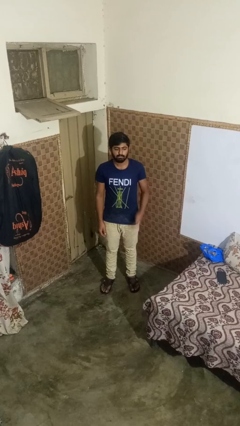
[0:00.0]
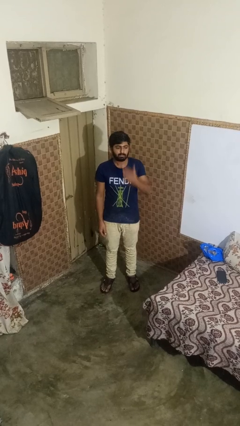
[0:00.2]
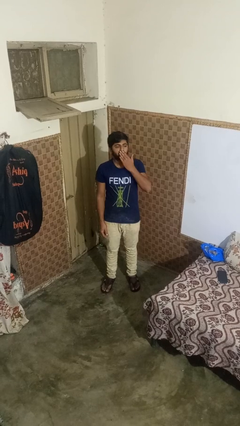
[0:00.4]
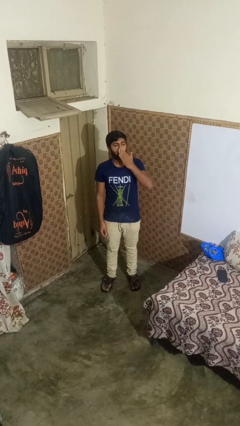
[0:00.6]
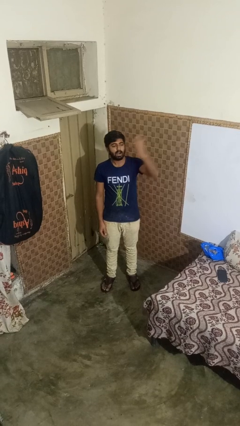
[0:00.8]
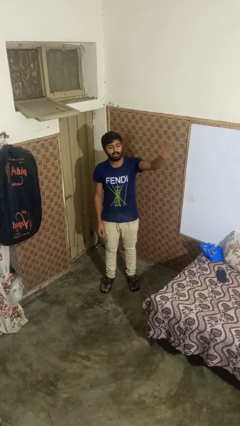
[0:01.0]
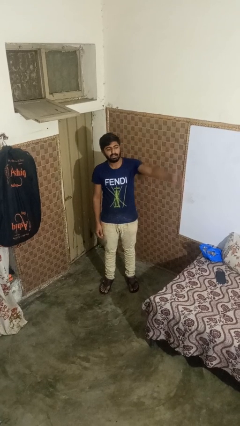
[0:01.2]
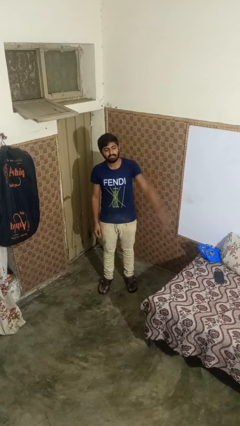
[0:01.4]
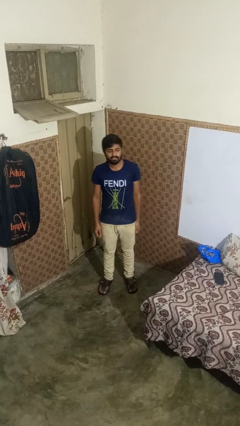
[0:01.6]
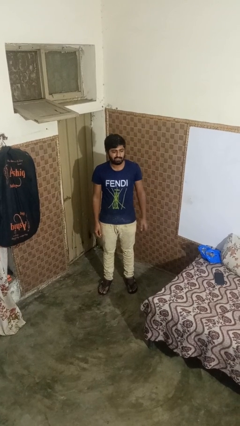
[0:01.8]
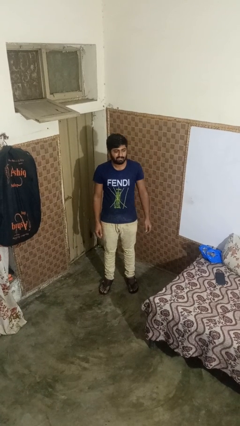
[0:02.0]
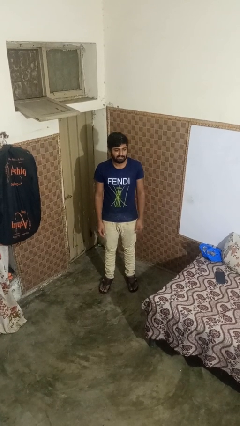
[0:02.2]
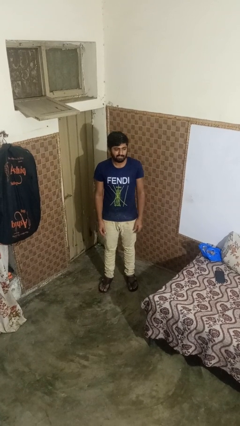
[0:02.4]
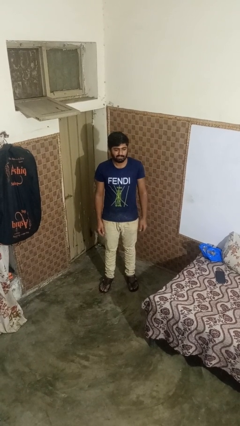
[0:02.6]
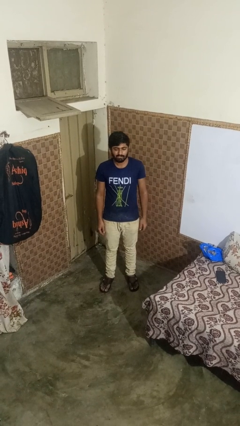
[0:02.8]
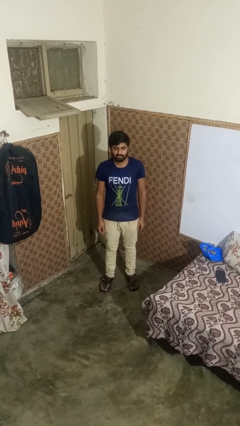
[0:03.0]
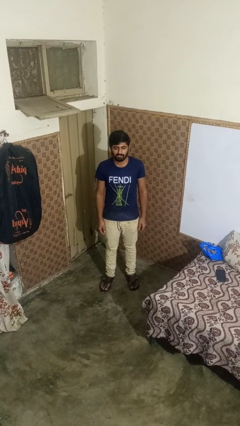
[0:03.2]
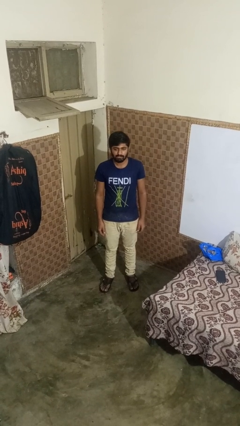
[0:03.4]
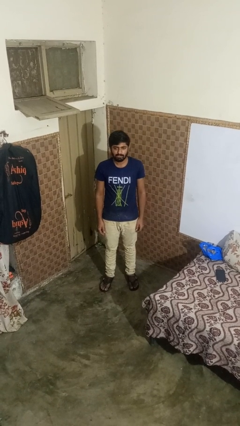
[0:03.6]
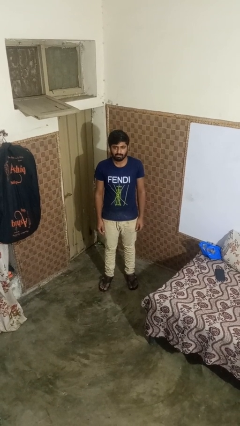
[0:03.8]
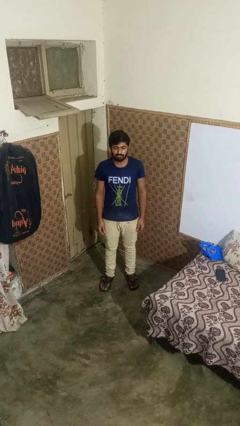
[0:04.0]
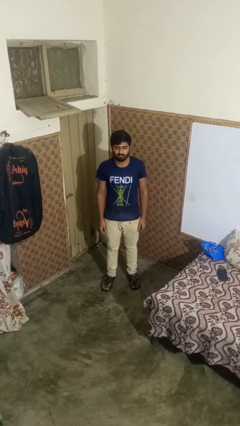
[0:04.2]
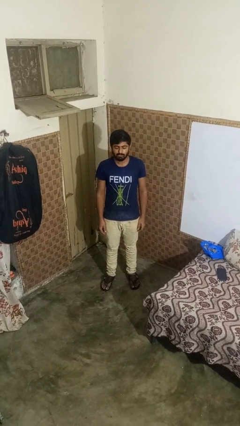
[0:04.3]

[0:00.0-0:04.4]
person gestures blow kiss

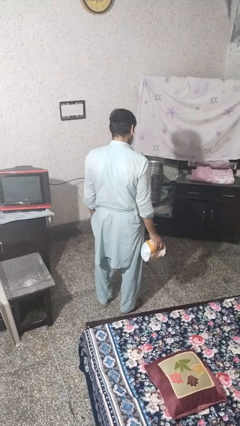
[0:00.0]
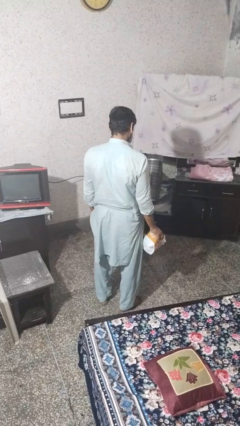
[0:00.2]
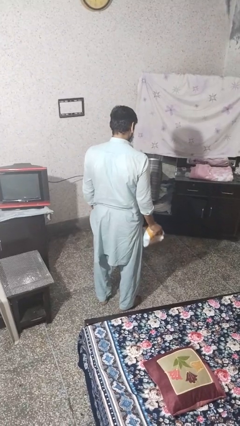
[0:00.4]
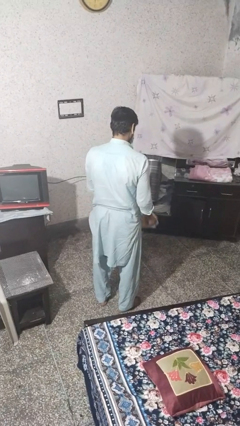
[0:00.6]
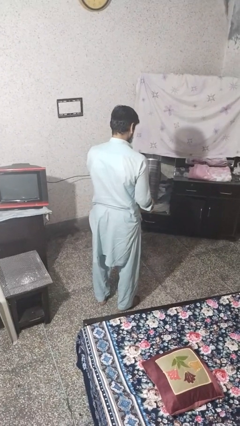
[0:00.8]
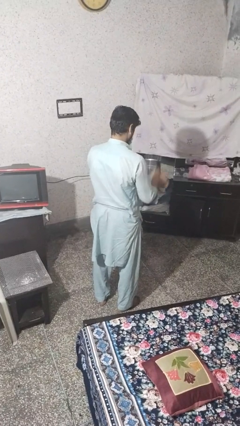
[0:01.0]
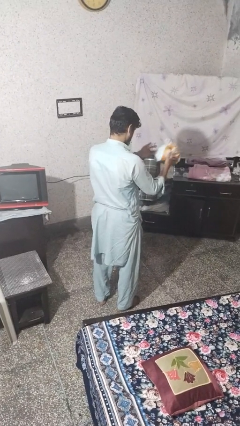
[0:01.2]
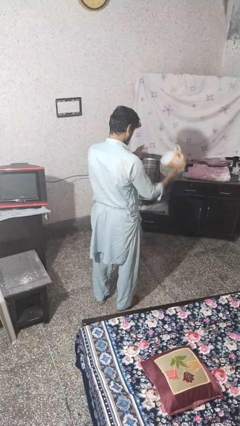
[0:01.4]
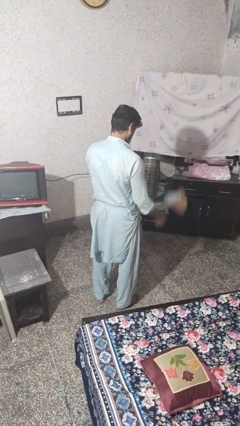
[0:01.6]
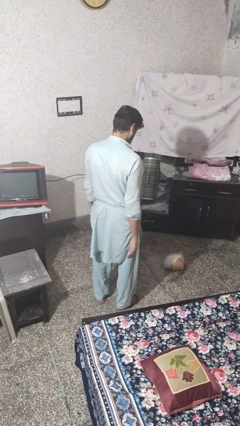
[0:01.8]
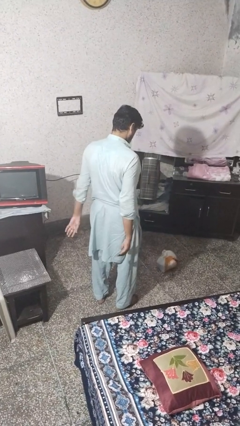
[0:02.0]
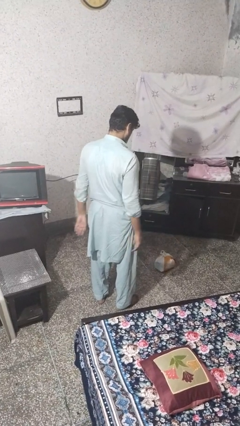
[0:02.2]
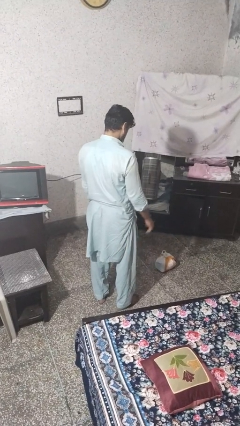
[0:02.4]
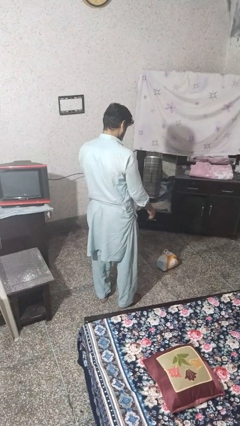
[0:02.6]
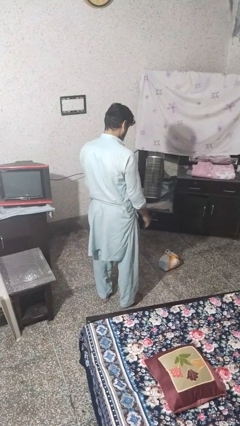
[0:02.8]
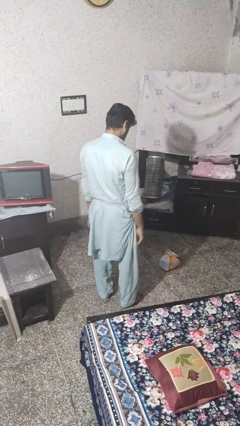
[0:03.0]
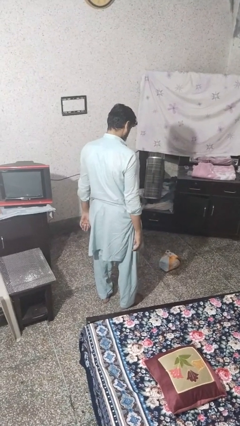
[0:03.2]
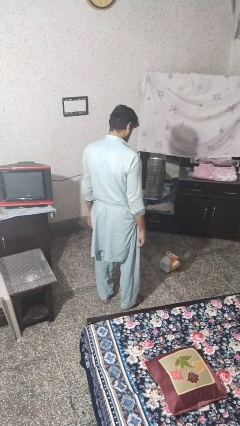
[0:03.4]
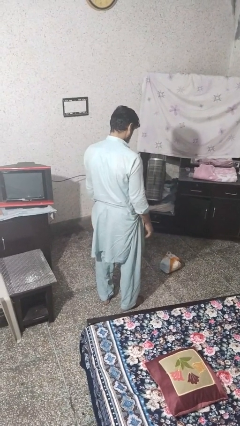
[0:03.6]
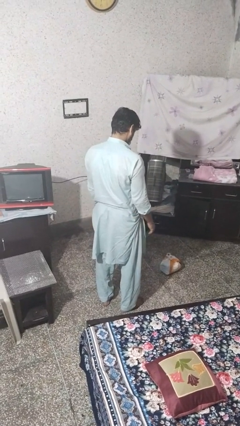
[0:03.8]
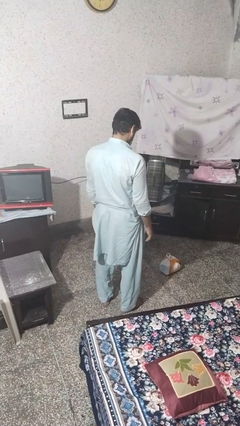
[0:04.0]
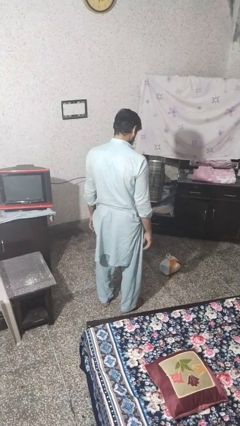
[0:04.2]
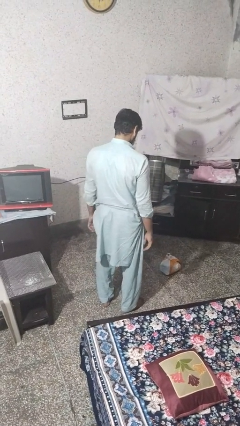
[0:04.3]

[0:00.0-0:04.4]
person throws object to ground

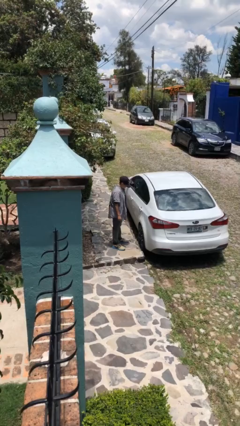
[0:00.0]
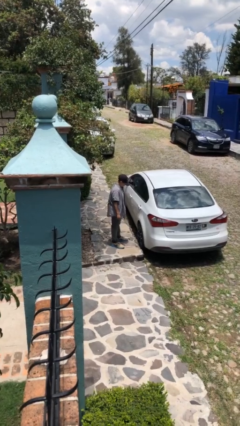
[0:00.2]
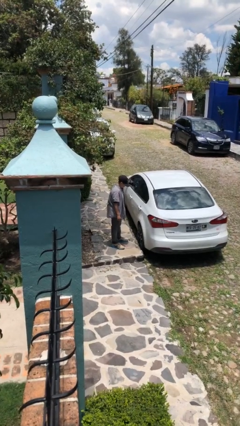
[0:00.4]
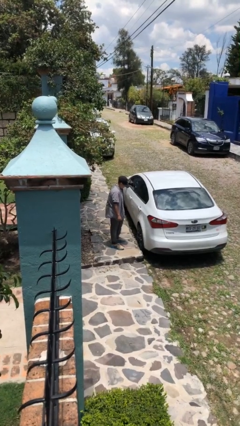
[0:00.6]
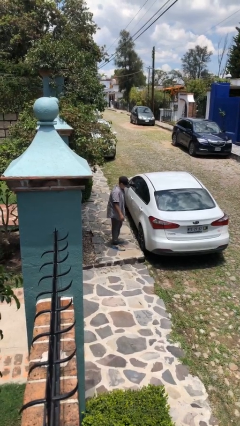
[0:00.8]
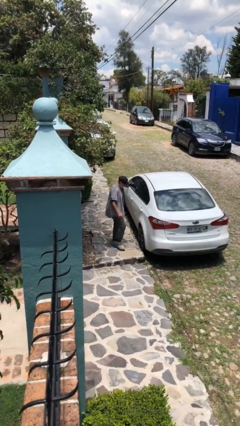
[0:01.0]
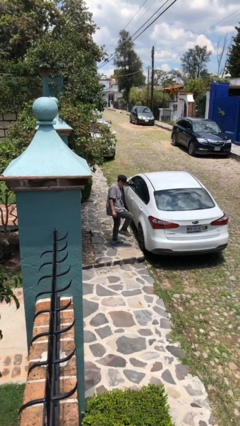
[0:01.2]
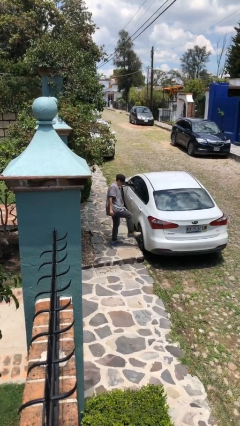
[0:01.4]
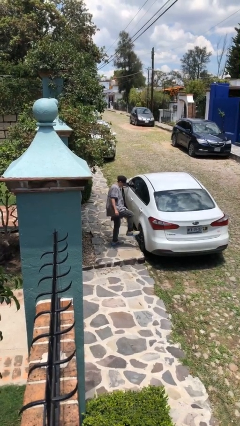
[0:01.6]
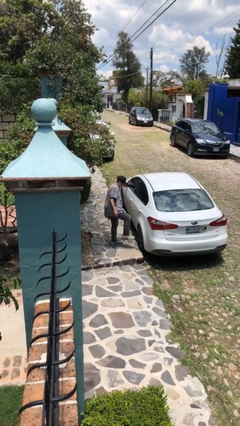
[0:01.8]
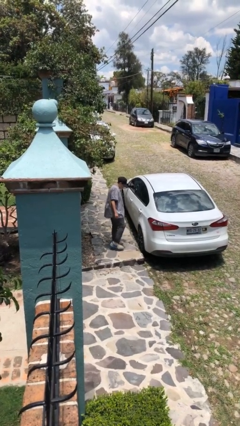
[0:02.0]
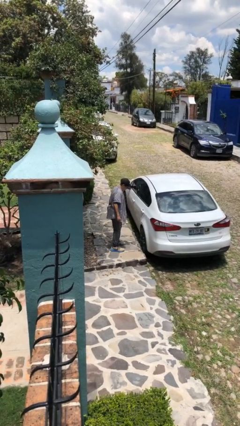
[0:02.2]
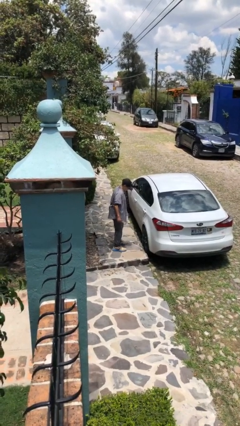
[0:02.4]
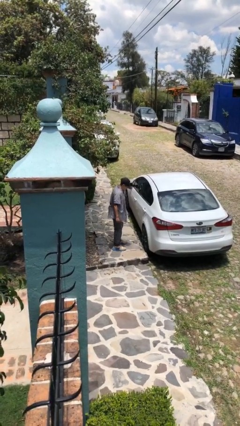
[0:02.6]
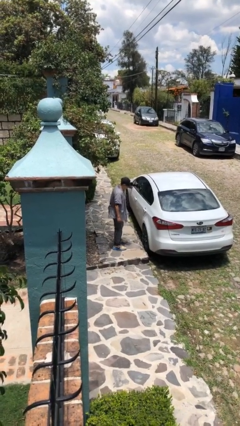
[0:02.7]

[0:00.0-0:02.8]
person kicks car tires

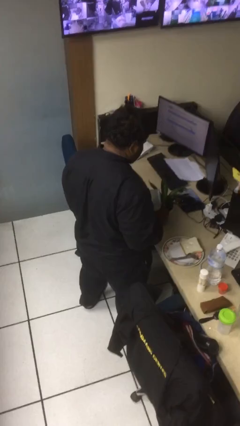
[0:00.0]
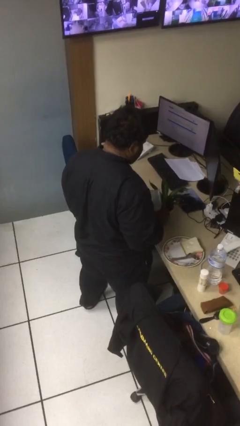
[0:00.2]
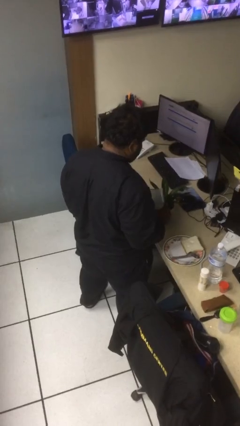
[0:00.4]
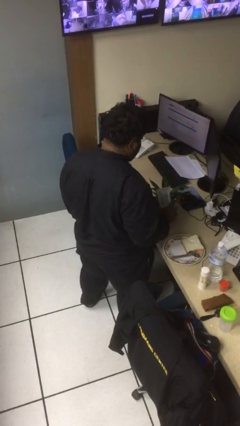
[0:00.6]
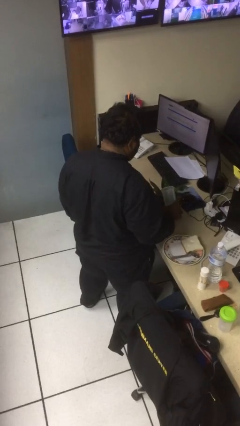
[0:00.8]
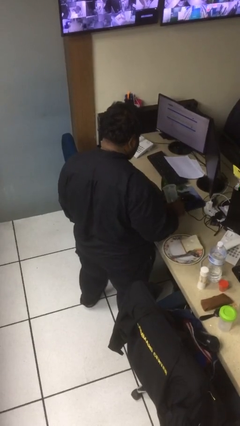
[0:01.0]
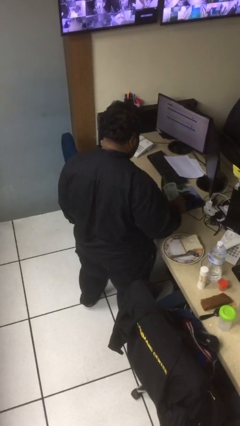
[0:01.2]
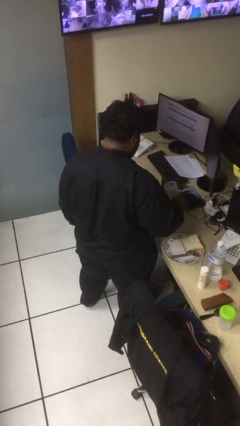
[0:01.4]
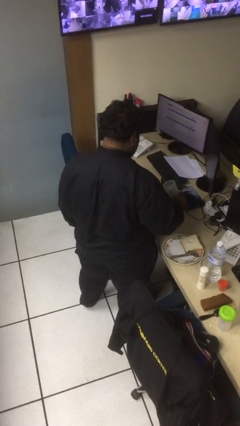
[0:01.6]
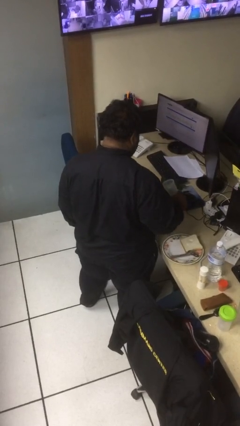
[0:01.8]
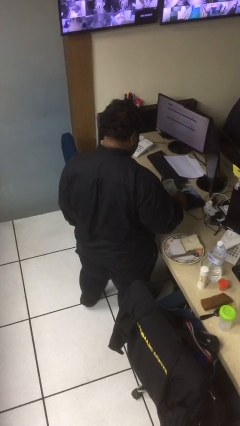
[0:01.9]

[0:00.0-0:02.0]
person waters houseplant

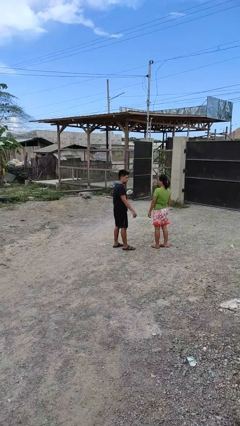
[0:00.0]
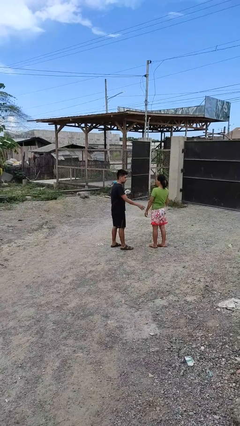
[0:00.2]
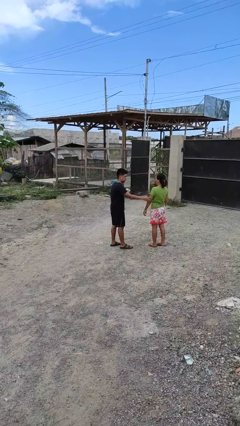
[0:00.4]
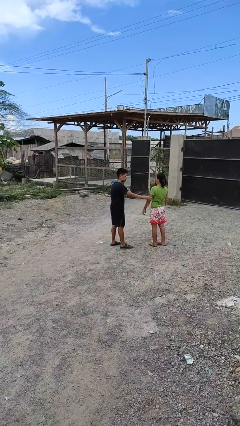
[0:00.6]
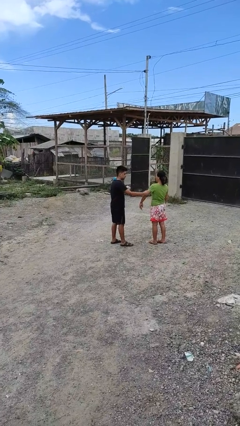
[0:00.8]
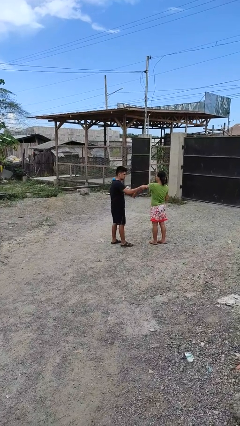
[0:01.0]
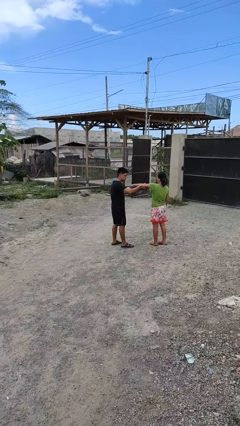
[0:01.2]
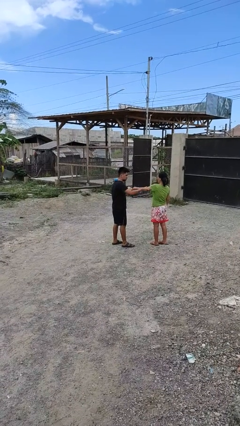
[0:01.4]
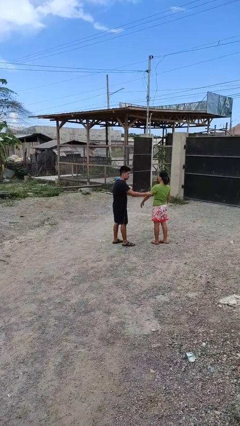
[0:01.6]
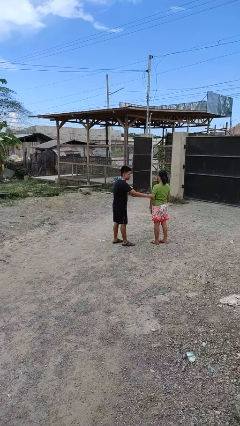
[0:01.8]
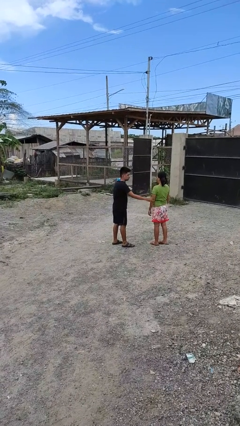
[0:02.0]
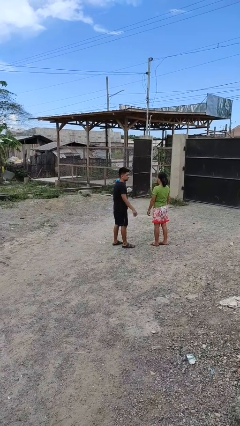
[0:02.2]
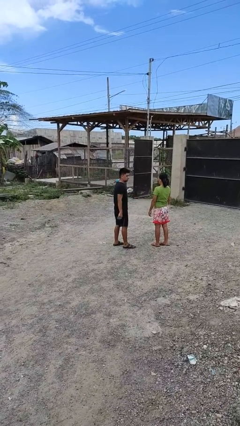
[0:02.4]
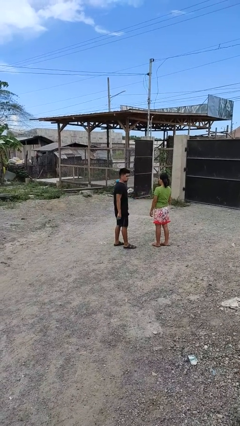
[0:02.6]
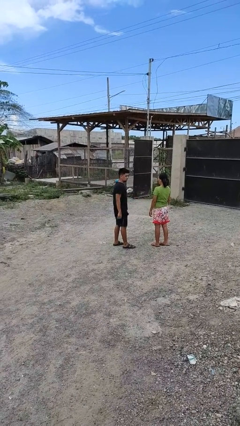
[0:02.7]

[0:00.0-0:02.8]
person grabs person by bicep

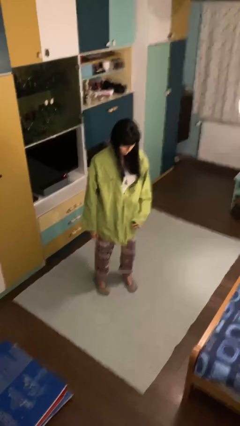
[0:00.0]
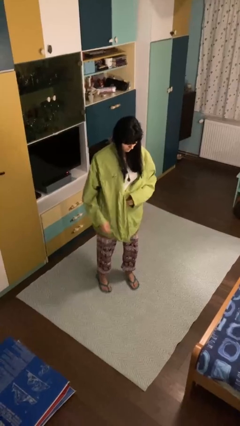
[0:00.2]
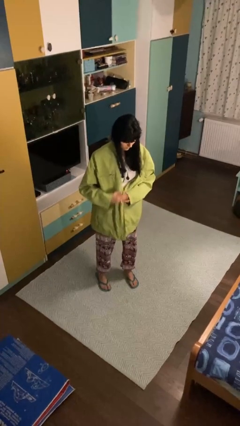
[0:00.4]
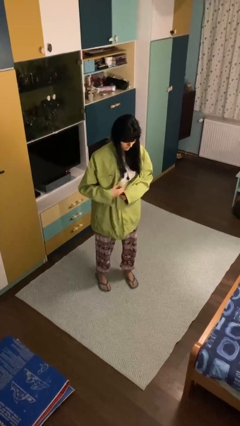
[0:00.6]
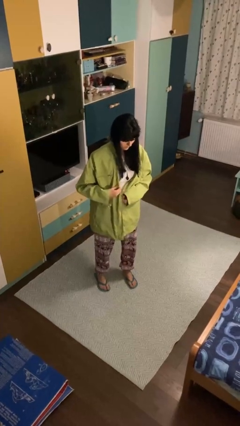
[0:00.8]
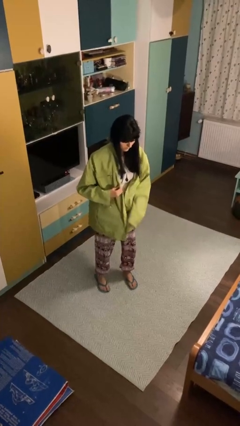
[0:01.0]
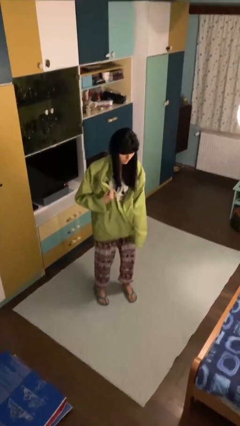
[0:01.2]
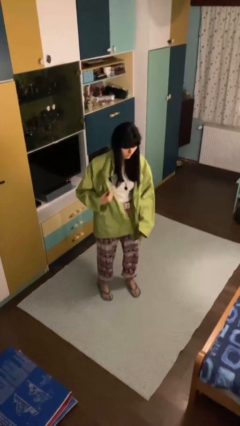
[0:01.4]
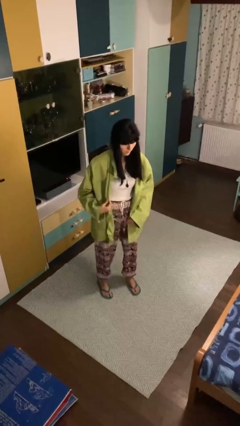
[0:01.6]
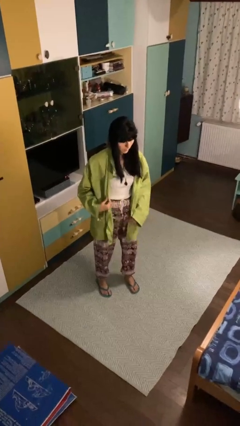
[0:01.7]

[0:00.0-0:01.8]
person unzips jacket
